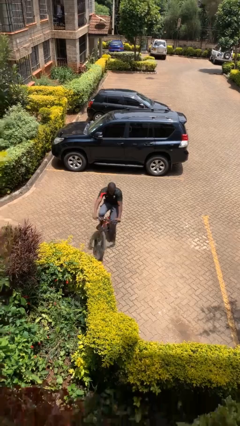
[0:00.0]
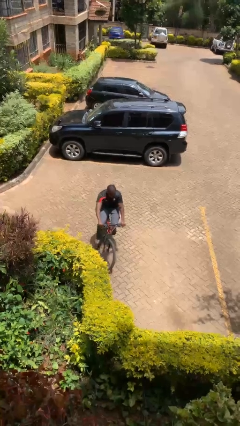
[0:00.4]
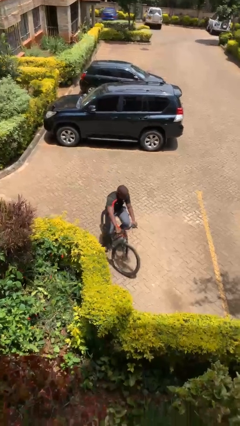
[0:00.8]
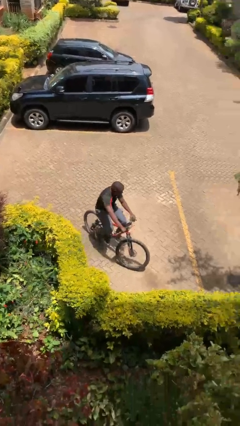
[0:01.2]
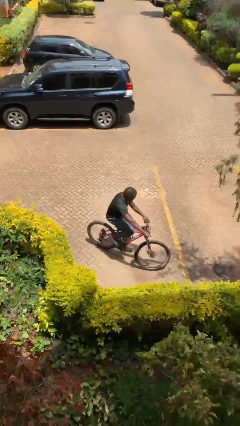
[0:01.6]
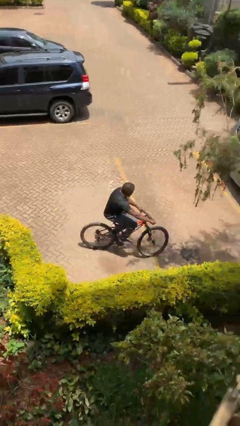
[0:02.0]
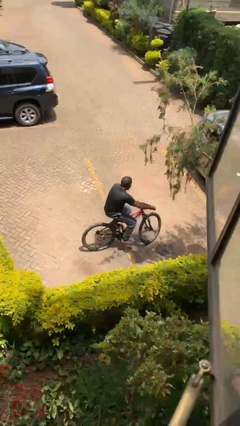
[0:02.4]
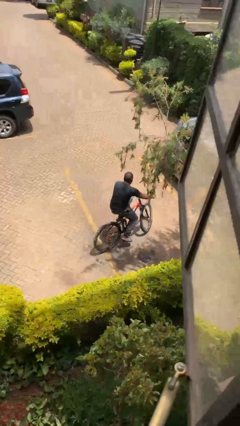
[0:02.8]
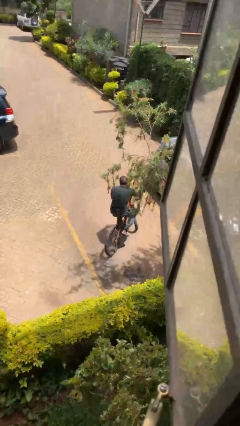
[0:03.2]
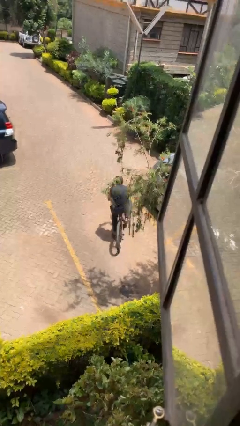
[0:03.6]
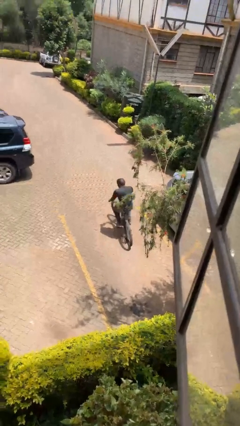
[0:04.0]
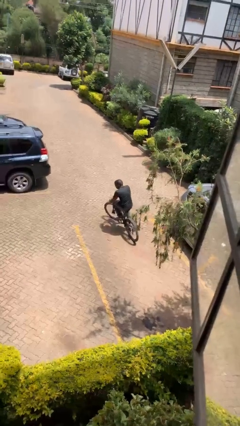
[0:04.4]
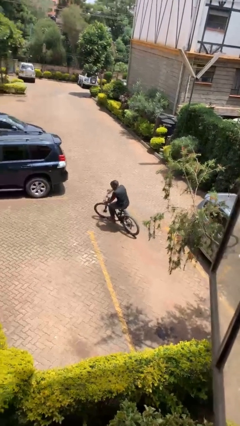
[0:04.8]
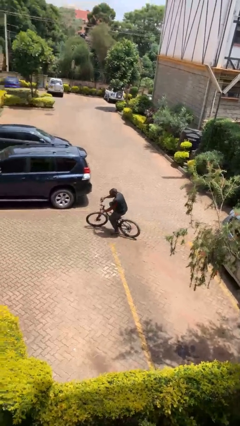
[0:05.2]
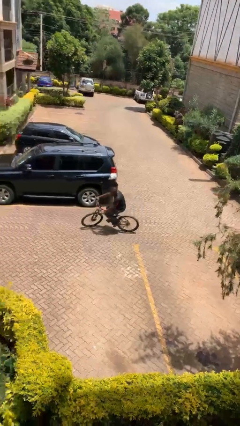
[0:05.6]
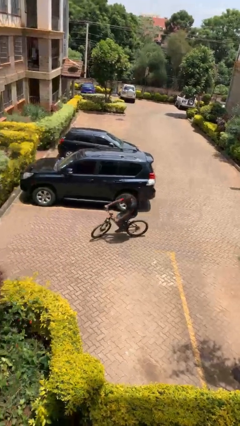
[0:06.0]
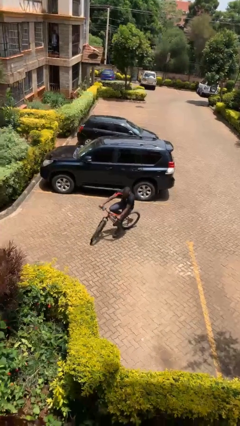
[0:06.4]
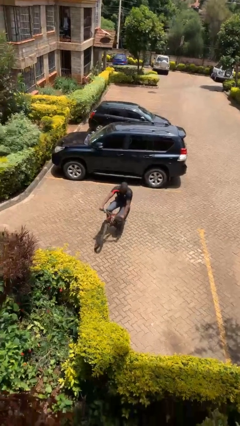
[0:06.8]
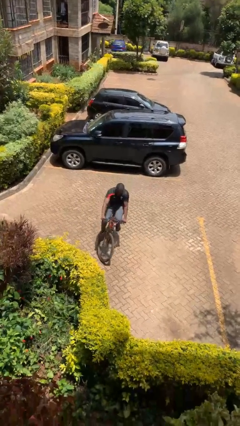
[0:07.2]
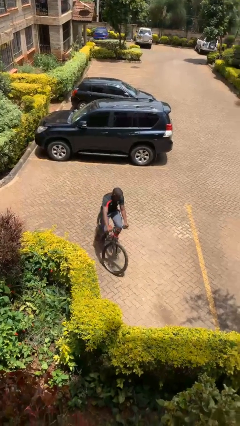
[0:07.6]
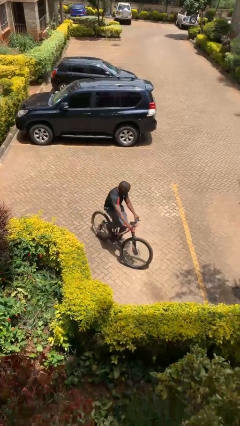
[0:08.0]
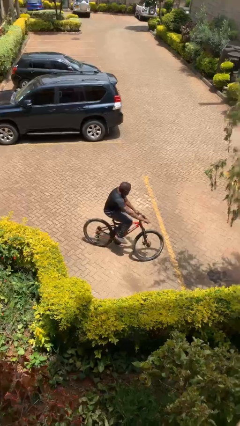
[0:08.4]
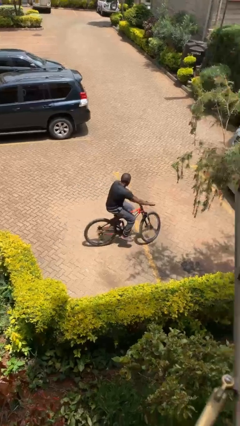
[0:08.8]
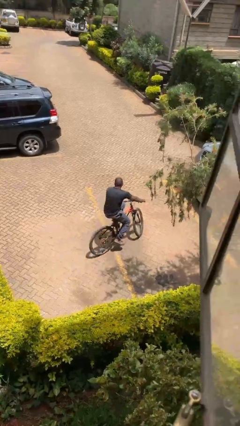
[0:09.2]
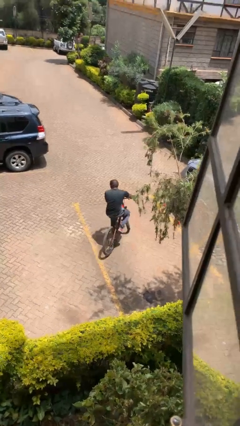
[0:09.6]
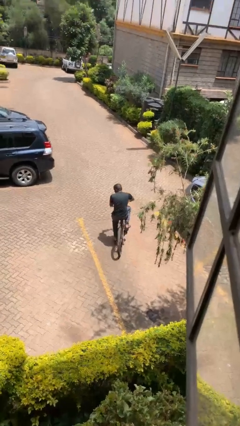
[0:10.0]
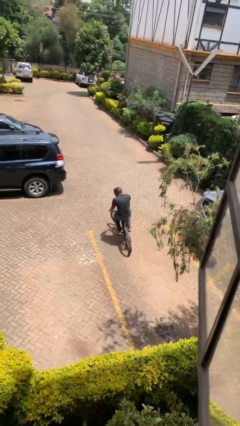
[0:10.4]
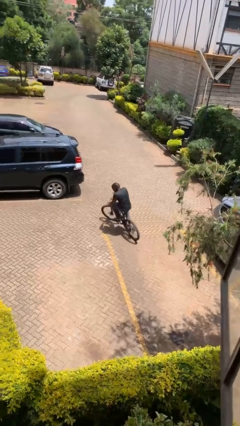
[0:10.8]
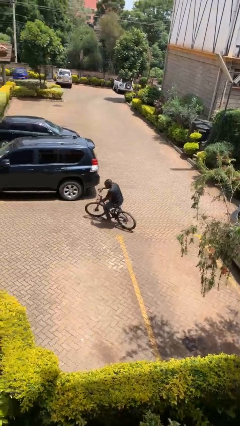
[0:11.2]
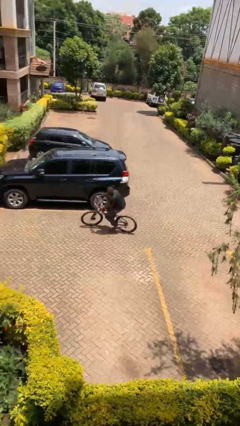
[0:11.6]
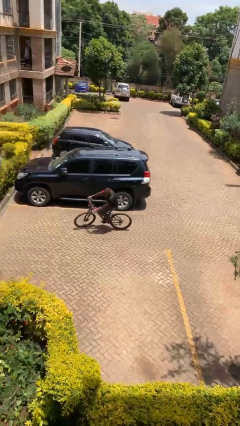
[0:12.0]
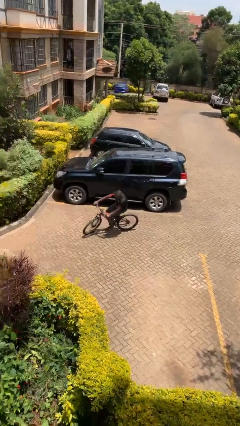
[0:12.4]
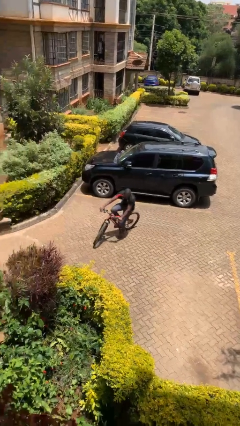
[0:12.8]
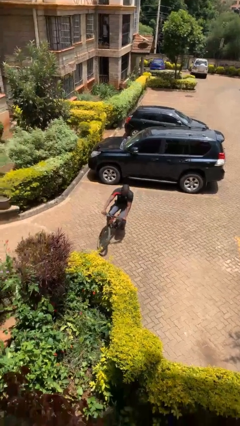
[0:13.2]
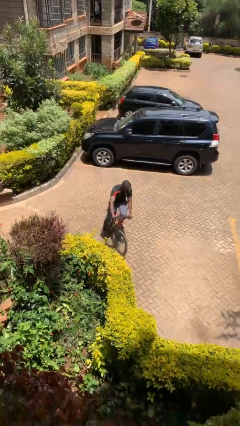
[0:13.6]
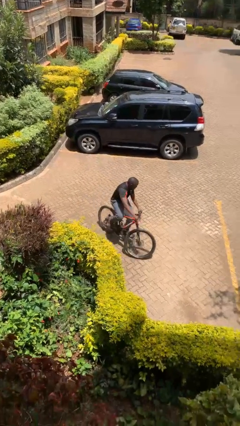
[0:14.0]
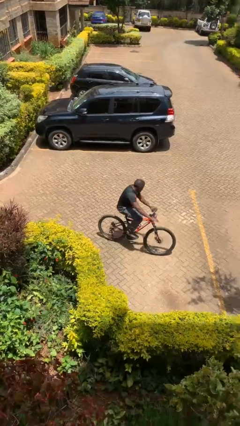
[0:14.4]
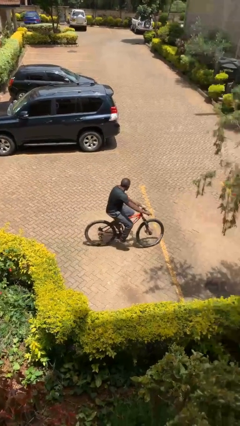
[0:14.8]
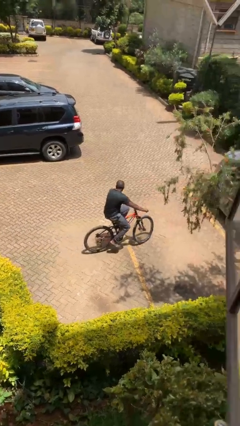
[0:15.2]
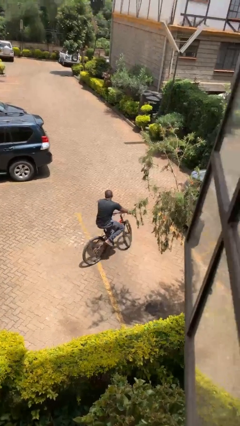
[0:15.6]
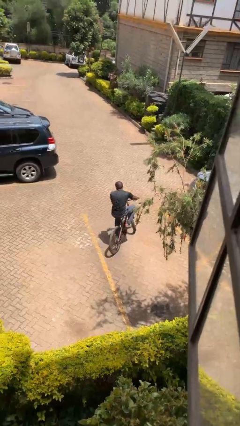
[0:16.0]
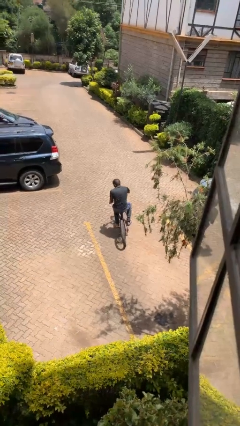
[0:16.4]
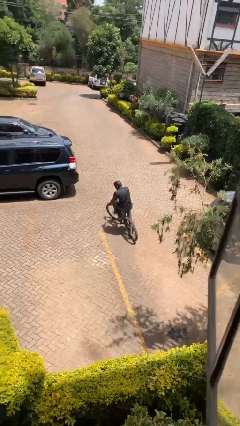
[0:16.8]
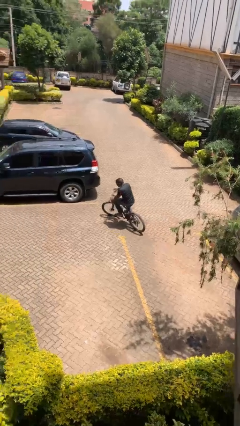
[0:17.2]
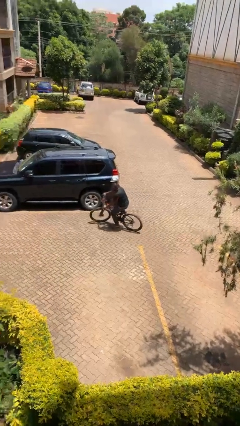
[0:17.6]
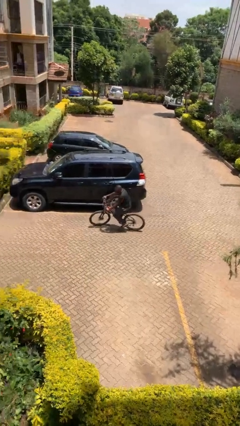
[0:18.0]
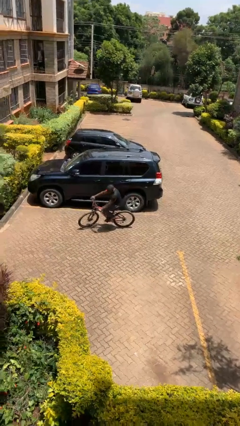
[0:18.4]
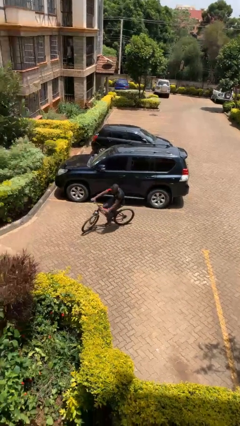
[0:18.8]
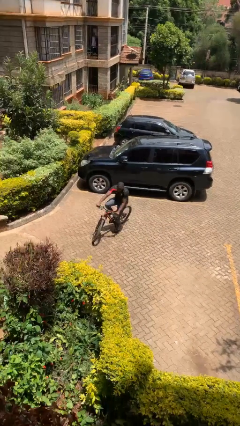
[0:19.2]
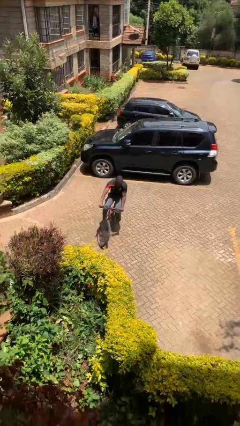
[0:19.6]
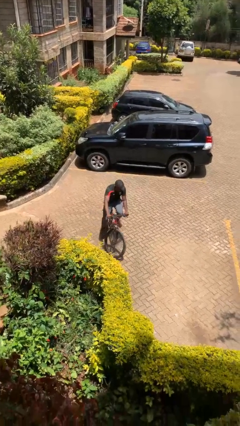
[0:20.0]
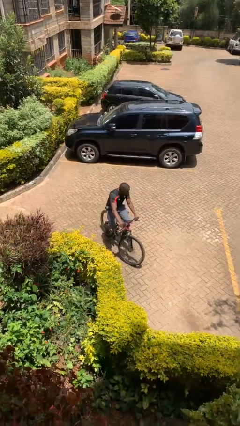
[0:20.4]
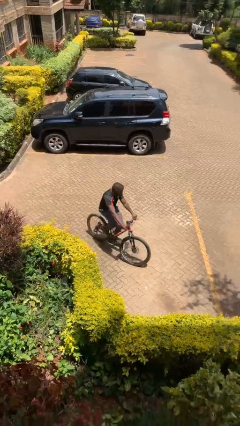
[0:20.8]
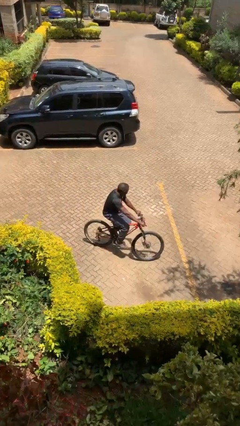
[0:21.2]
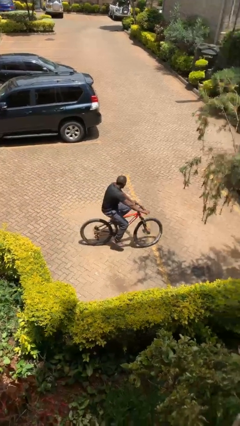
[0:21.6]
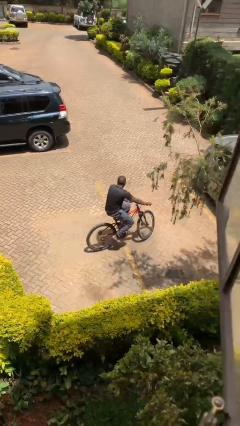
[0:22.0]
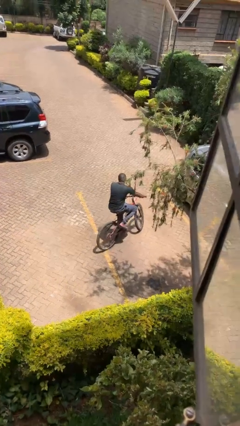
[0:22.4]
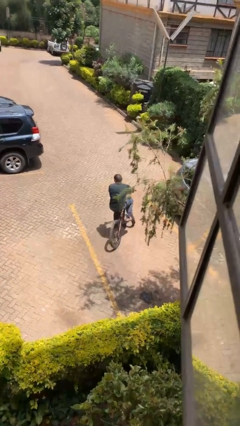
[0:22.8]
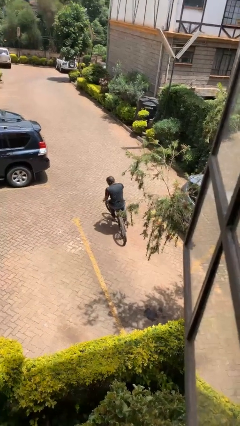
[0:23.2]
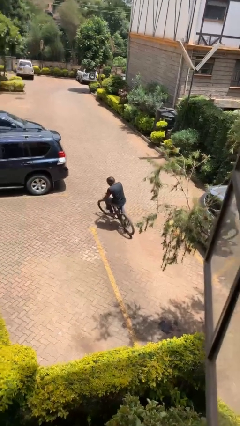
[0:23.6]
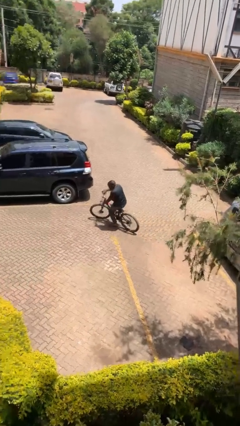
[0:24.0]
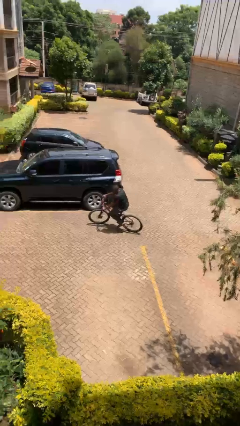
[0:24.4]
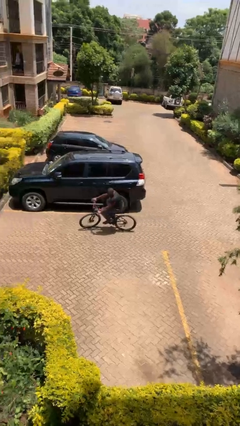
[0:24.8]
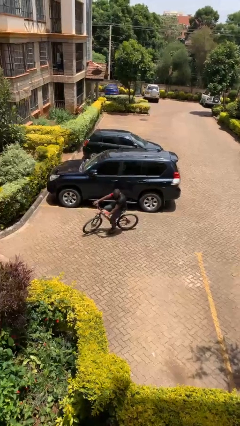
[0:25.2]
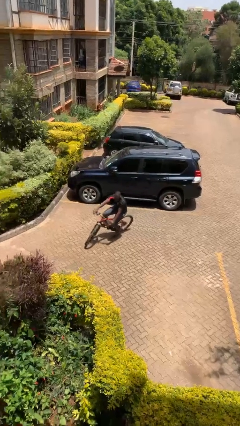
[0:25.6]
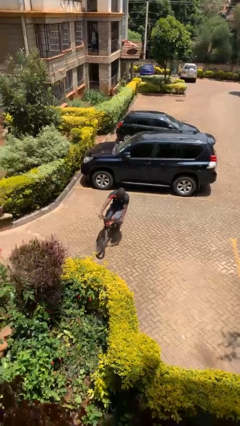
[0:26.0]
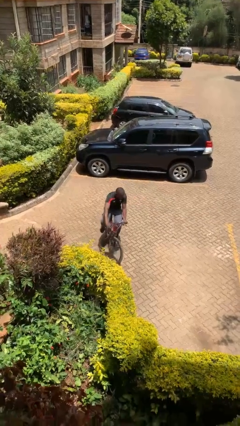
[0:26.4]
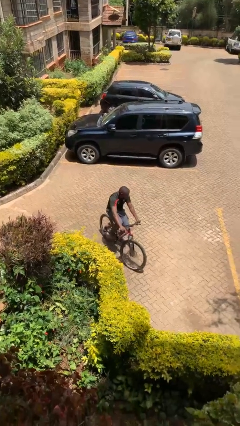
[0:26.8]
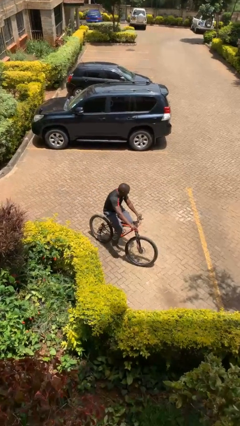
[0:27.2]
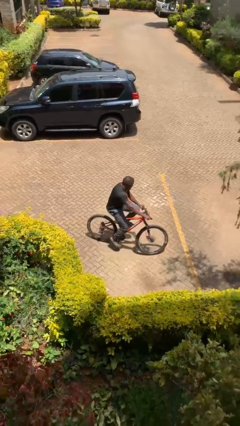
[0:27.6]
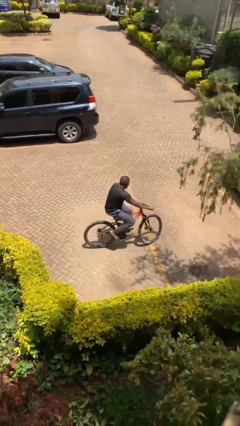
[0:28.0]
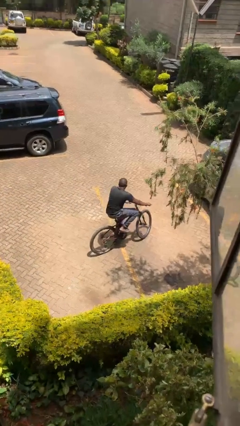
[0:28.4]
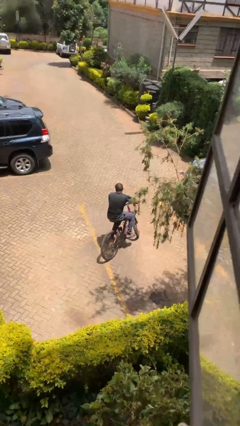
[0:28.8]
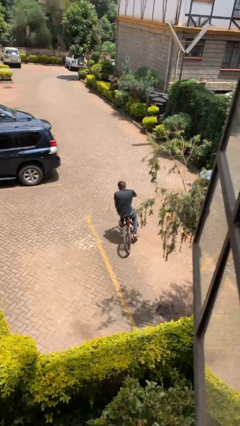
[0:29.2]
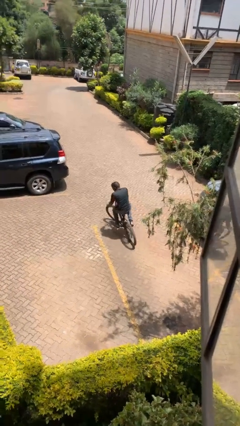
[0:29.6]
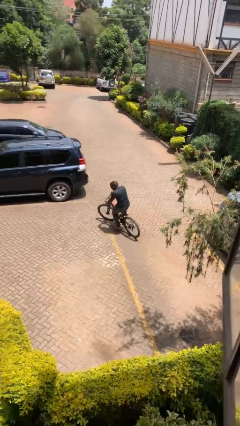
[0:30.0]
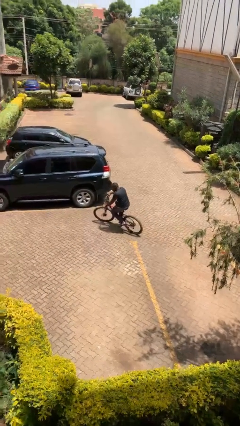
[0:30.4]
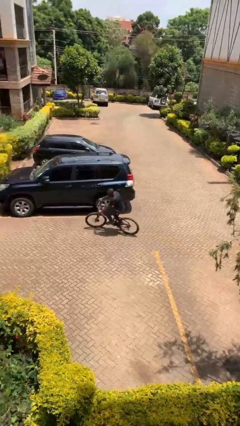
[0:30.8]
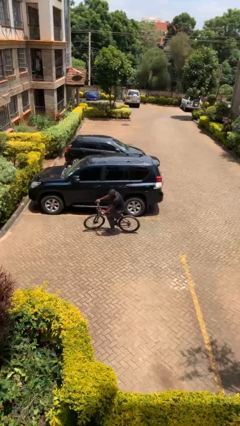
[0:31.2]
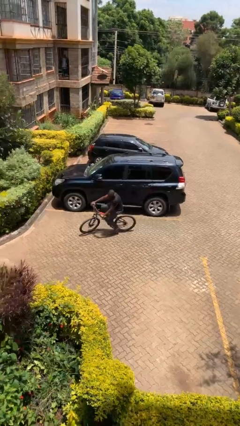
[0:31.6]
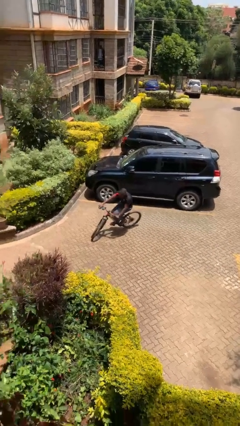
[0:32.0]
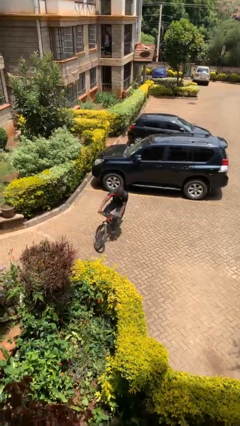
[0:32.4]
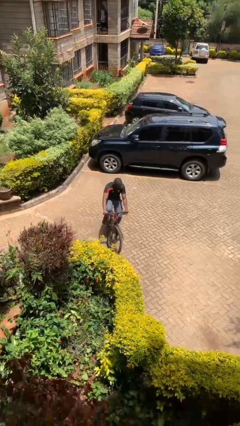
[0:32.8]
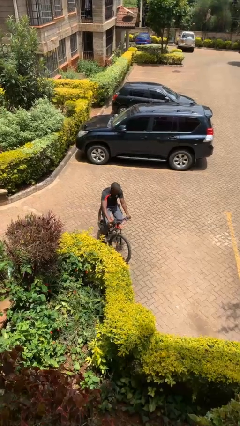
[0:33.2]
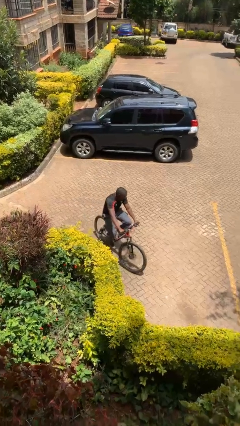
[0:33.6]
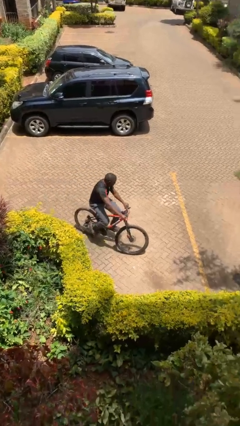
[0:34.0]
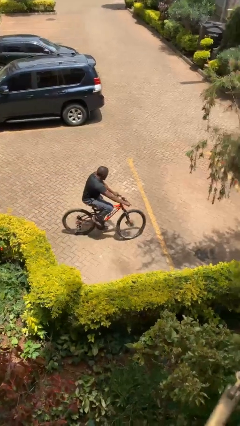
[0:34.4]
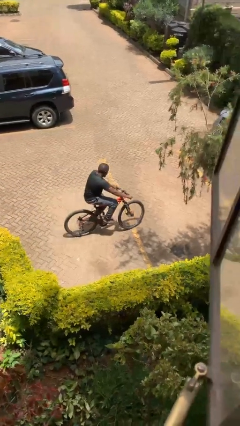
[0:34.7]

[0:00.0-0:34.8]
person rides bicycle

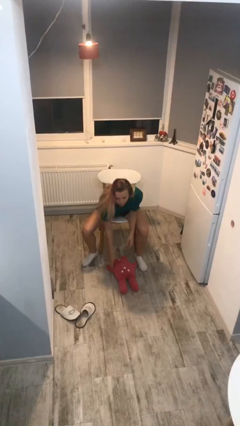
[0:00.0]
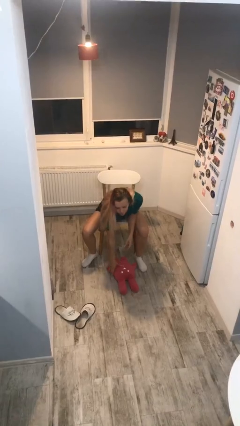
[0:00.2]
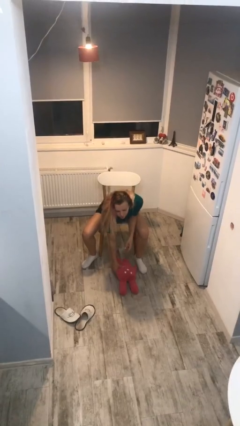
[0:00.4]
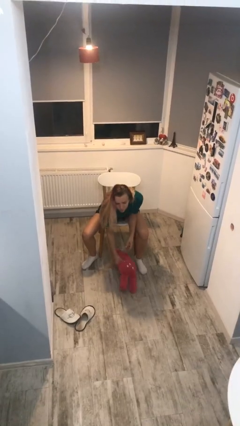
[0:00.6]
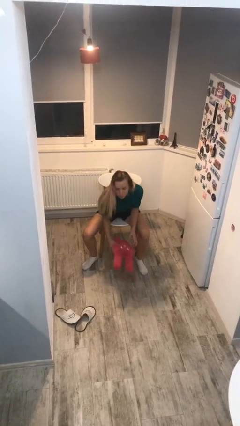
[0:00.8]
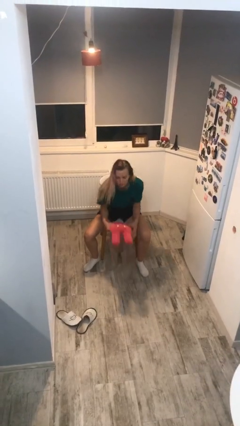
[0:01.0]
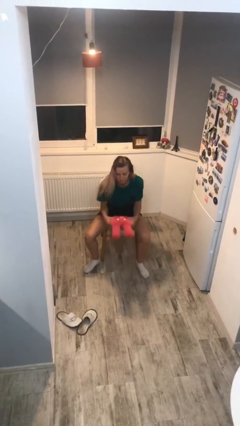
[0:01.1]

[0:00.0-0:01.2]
person picks up object from floor
